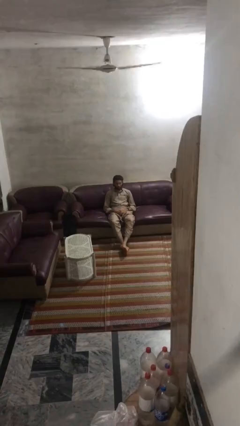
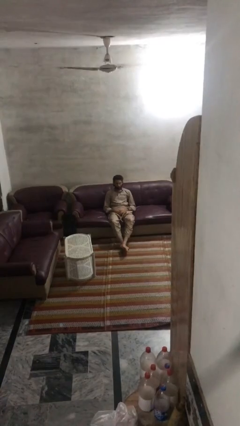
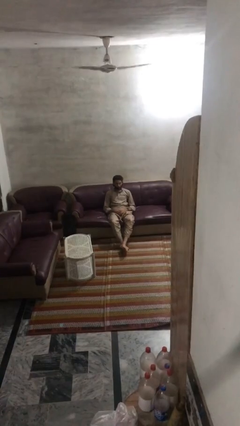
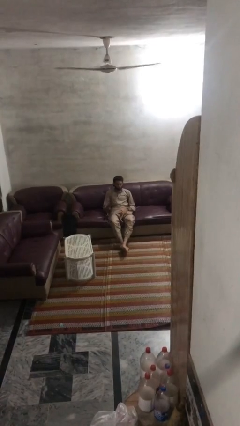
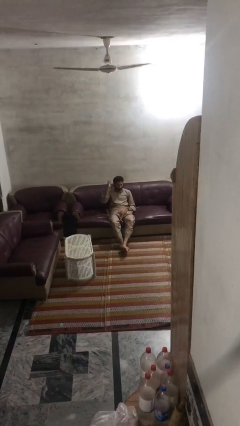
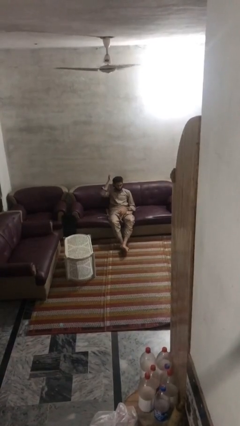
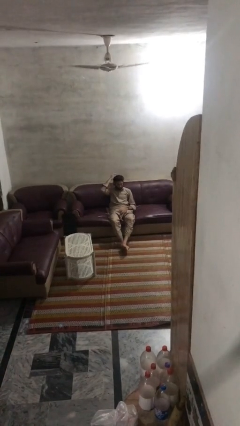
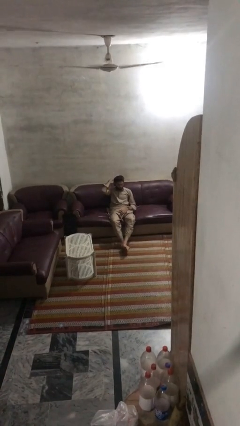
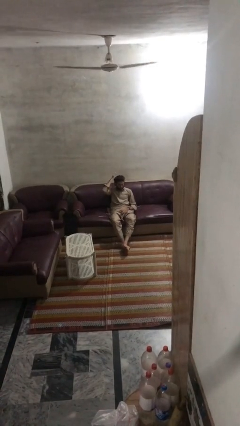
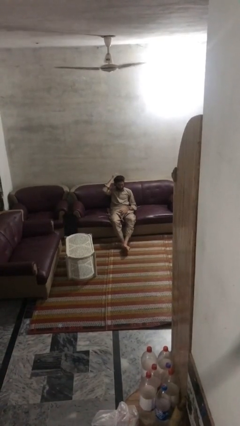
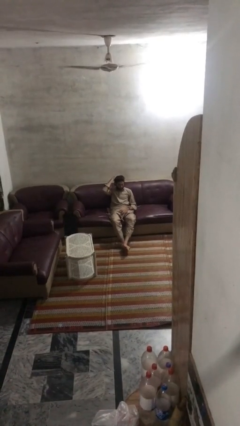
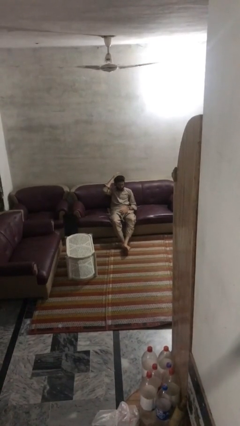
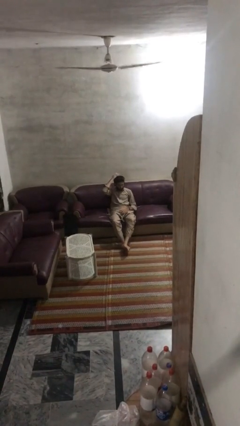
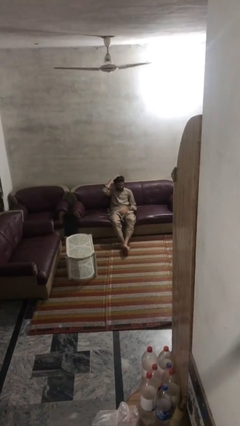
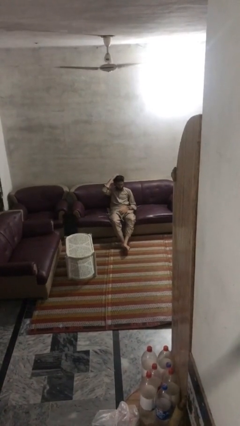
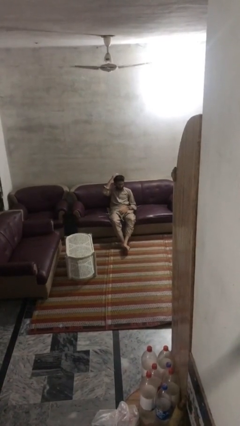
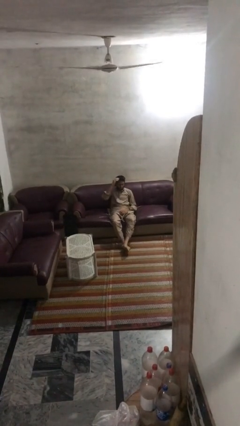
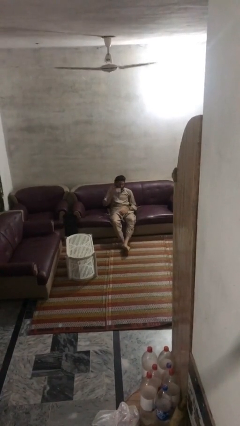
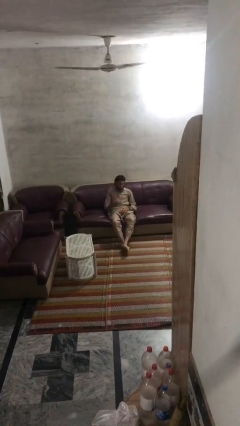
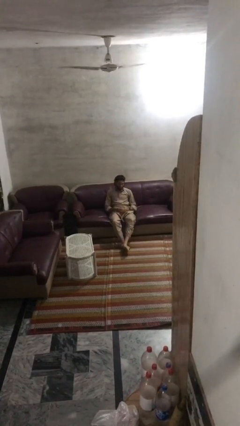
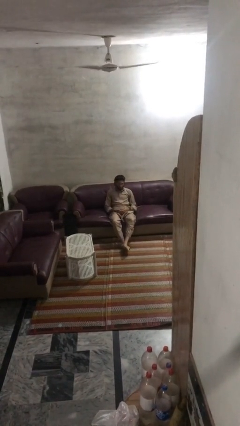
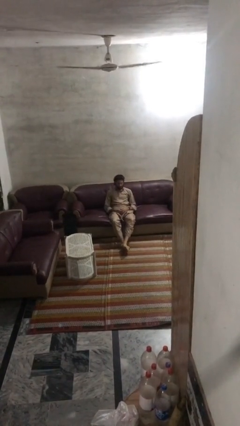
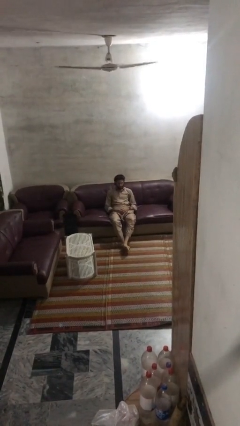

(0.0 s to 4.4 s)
person pats head

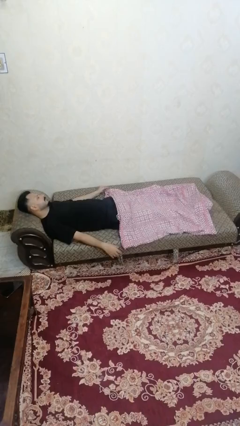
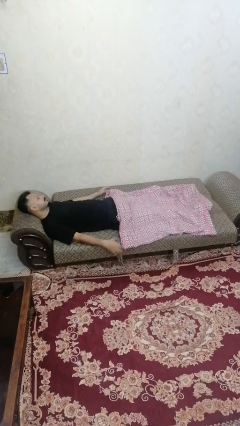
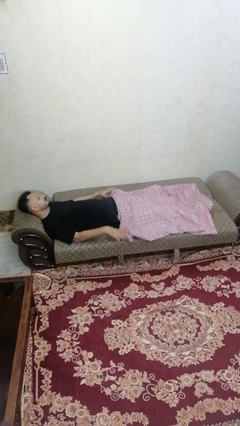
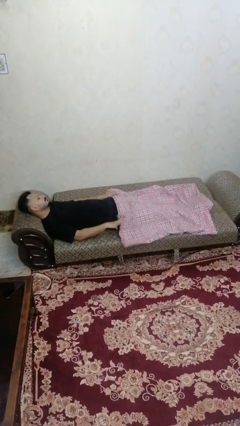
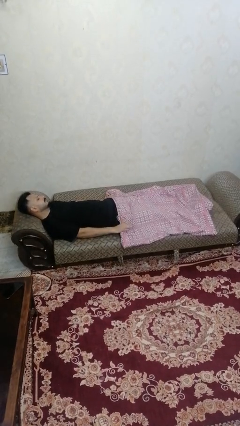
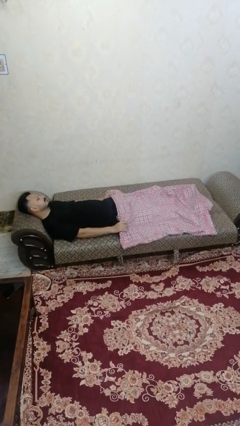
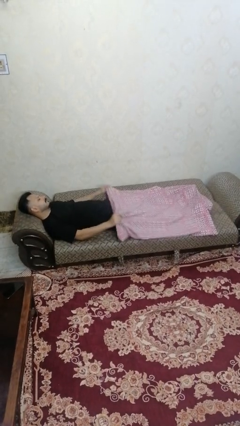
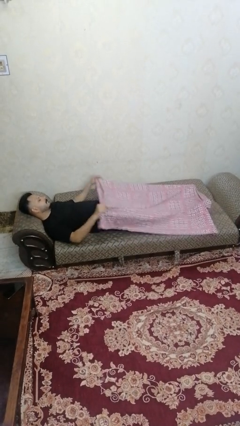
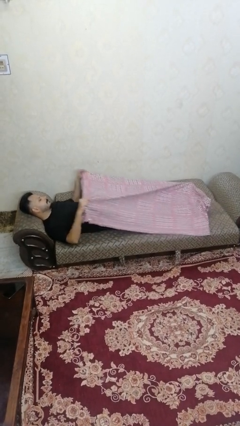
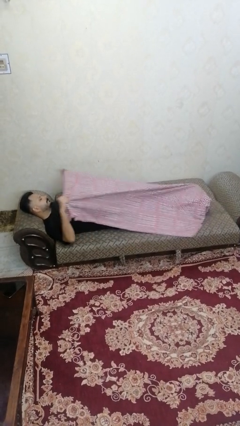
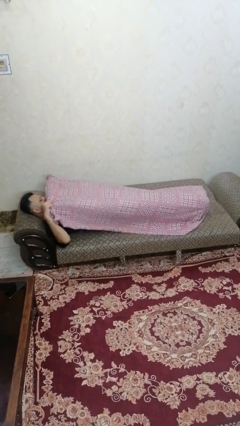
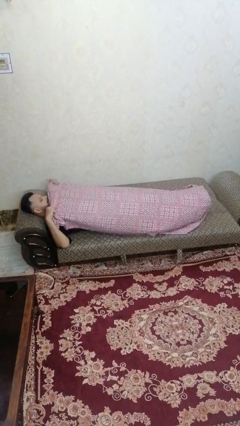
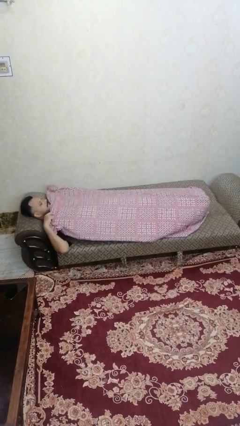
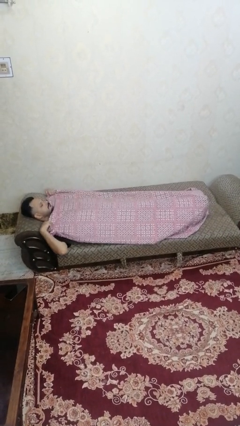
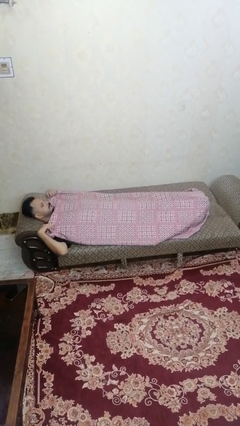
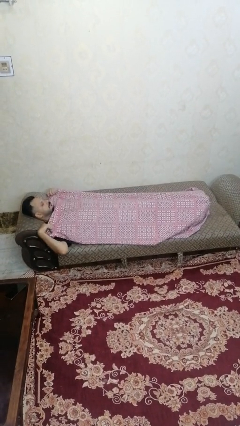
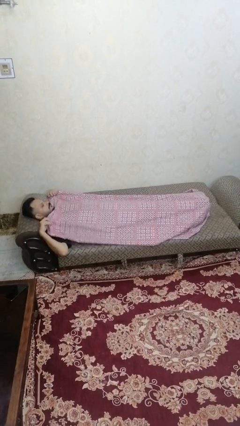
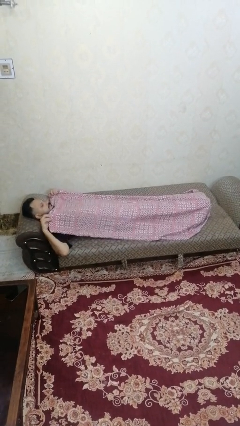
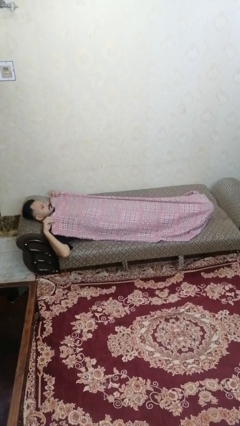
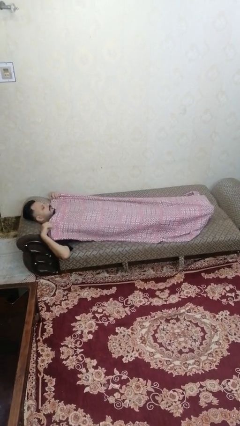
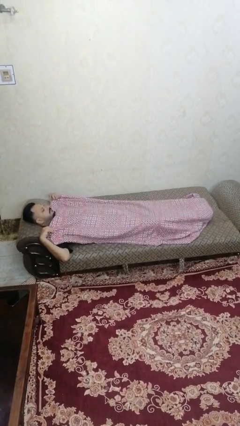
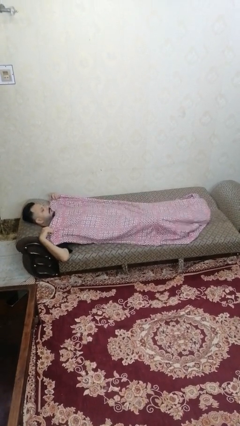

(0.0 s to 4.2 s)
person covers with bedsheets

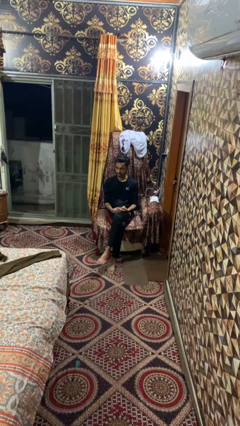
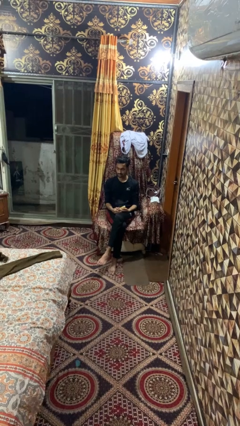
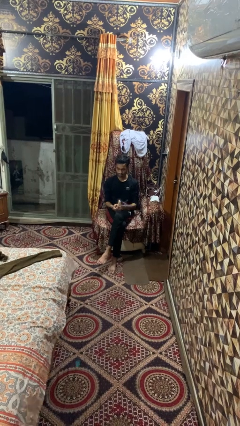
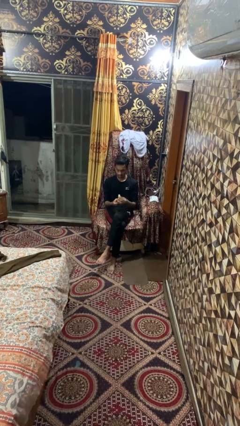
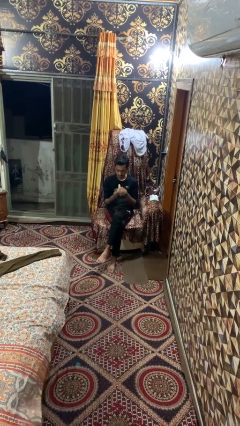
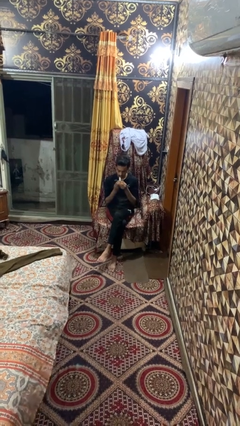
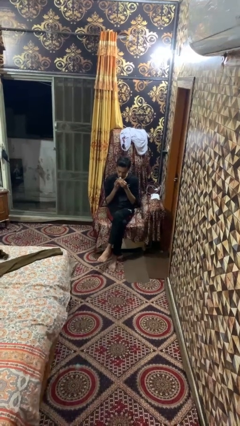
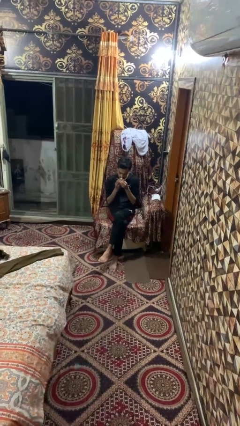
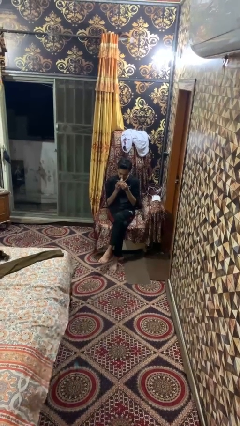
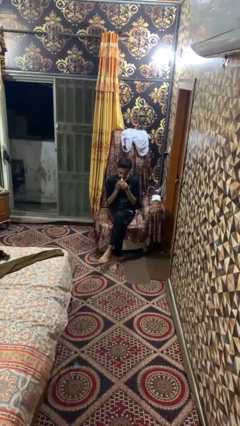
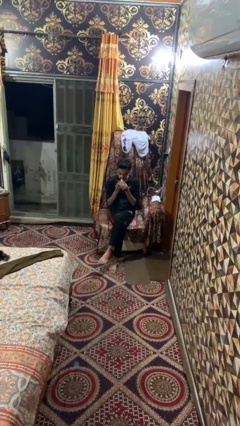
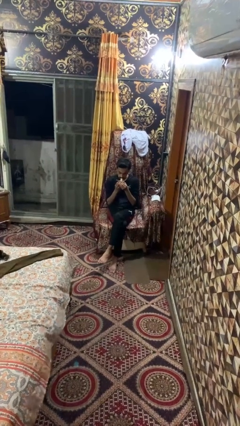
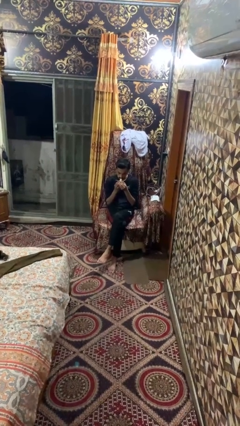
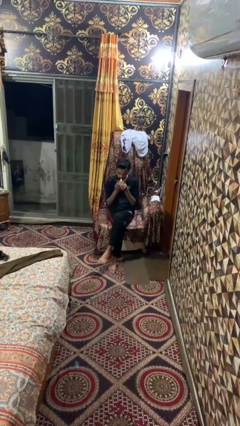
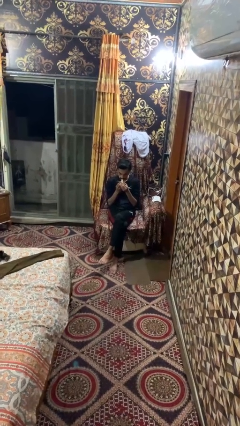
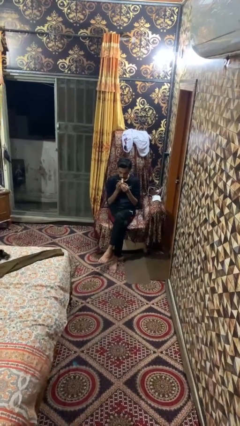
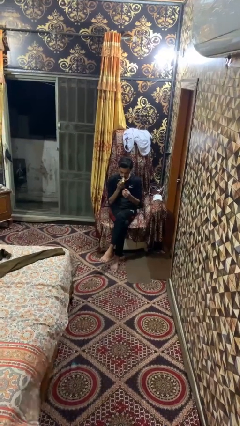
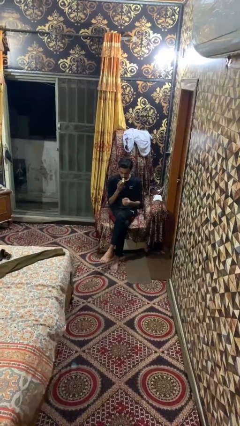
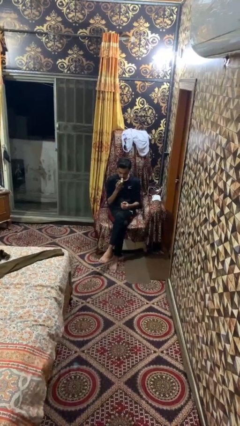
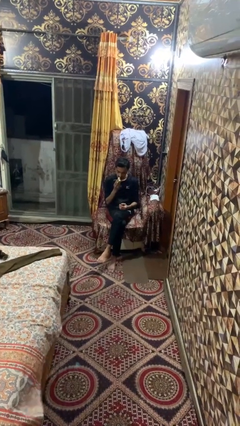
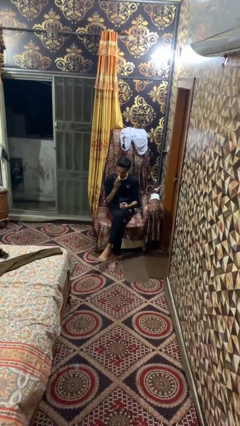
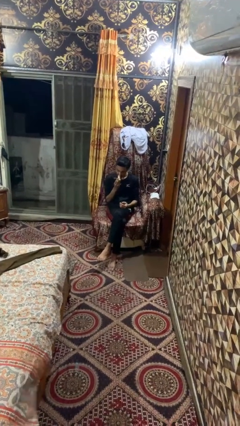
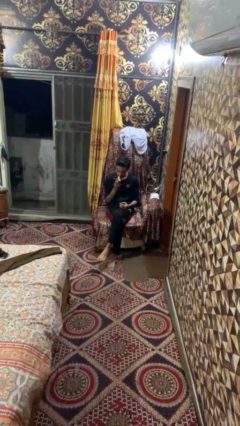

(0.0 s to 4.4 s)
person eats banana

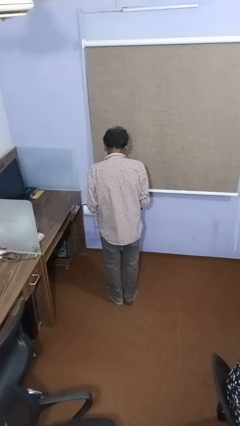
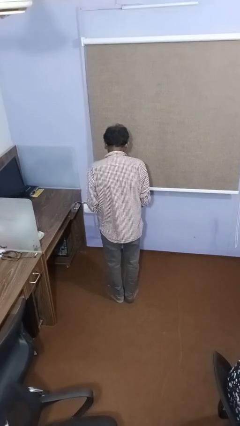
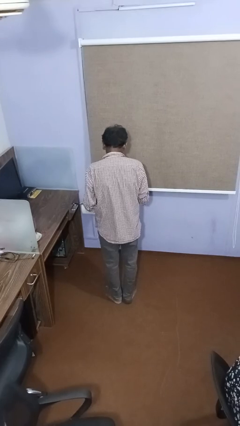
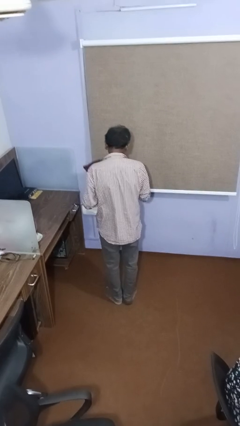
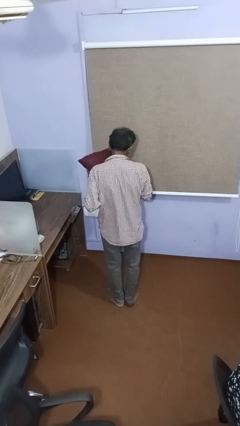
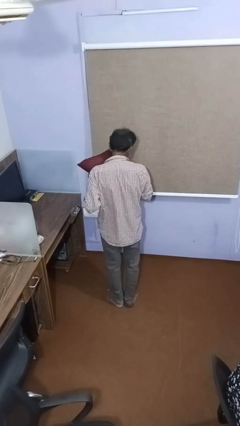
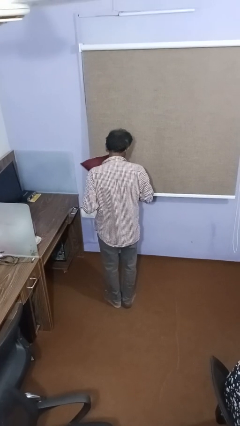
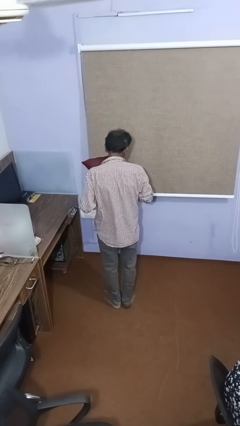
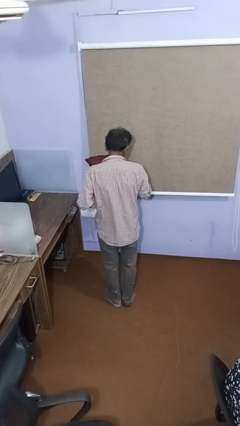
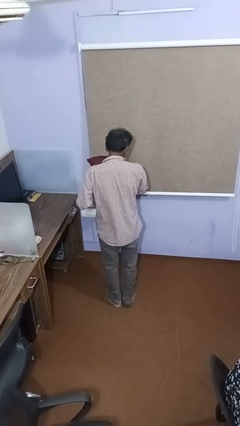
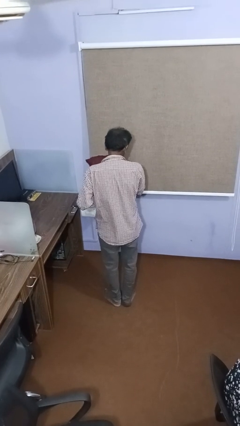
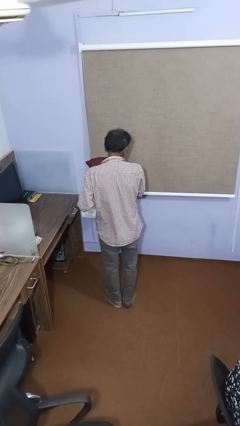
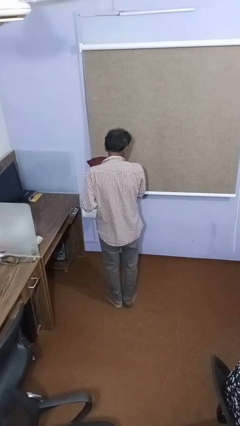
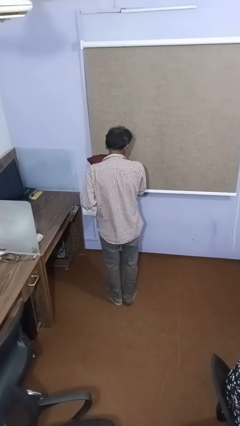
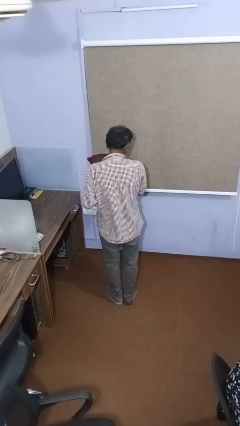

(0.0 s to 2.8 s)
person hugs stuffed animal

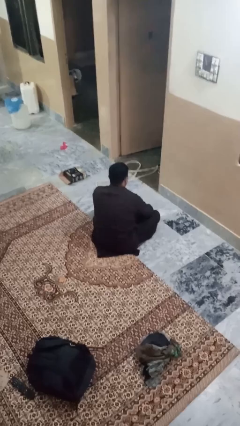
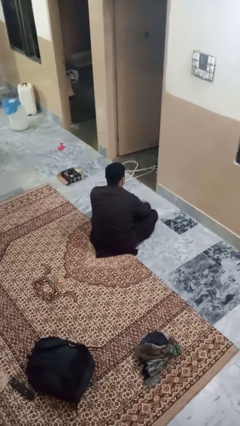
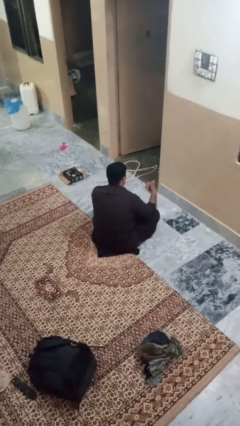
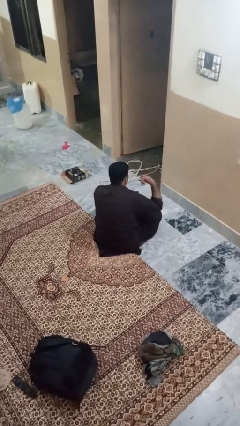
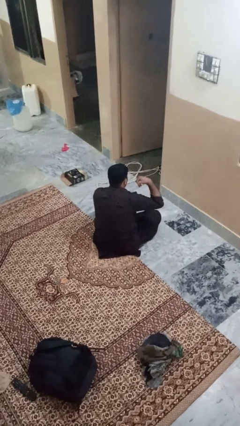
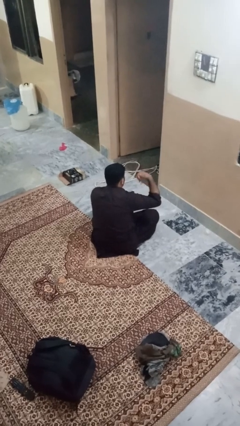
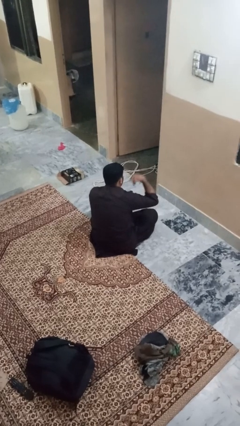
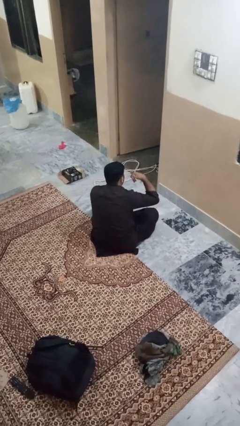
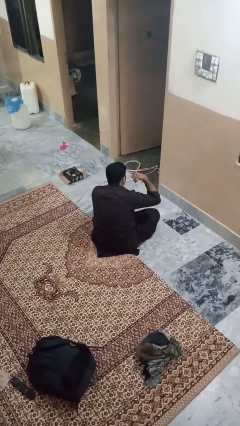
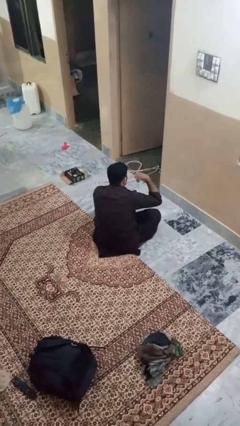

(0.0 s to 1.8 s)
person gestures call me
